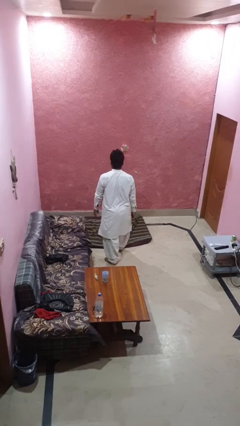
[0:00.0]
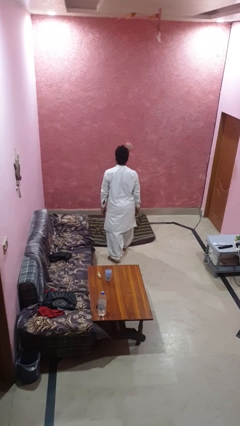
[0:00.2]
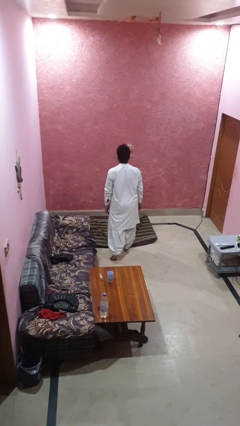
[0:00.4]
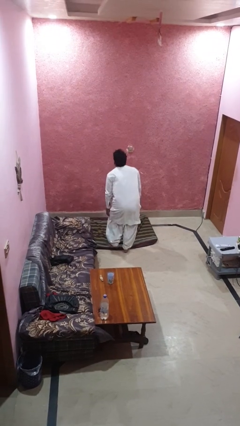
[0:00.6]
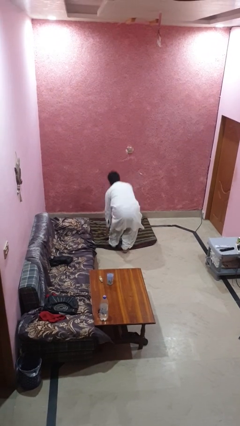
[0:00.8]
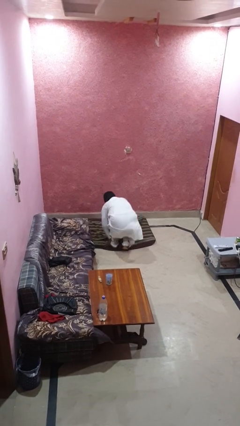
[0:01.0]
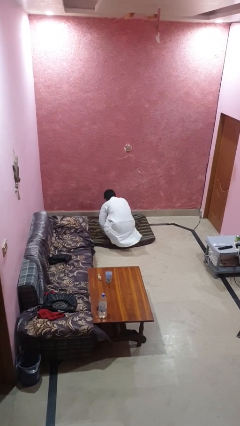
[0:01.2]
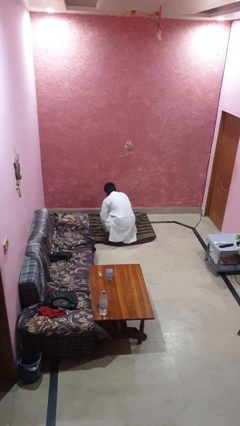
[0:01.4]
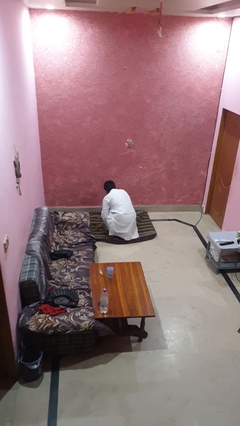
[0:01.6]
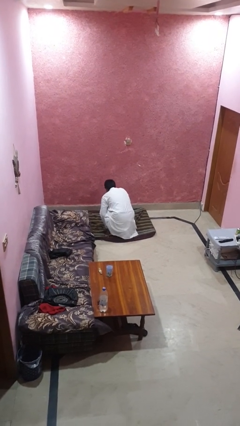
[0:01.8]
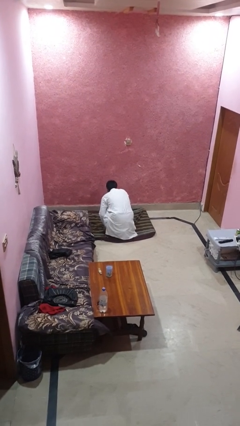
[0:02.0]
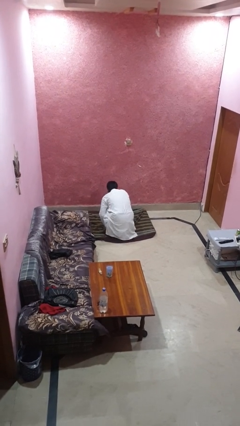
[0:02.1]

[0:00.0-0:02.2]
person trips on object on floor

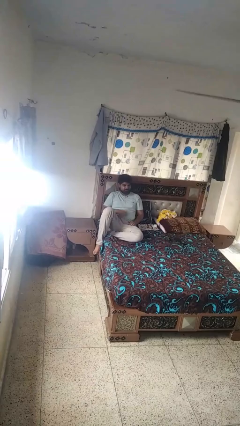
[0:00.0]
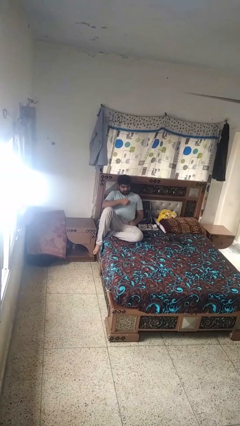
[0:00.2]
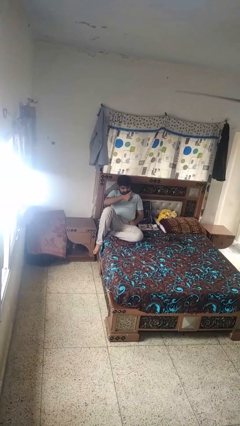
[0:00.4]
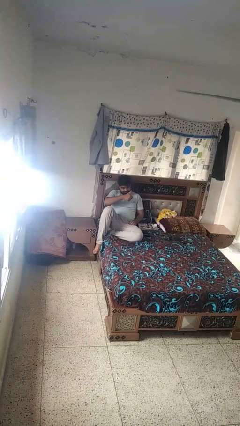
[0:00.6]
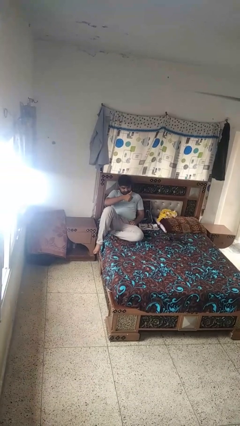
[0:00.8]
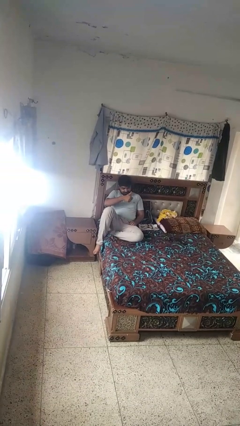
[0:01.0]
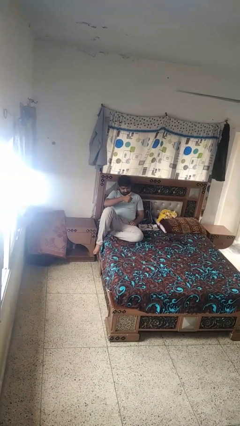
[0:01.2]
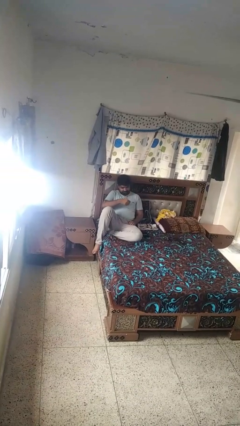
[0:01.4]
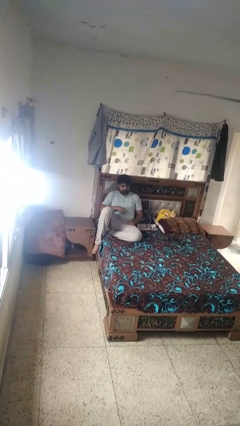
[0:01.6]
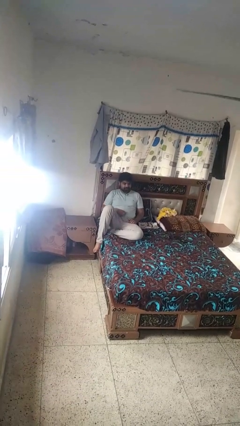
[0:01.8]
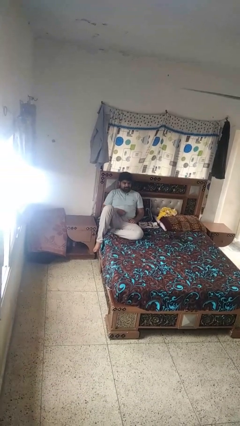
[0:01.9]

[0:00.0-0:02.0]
person gestures thumbs up

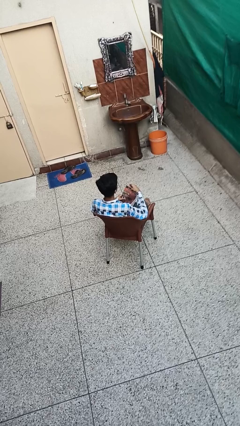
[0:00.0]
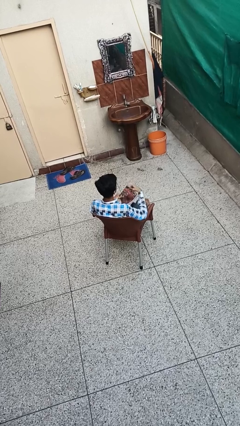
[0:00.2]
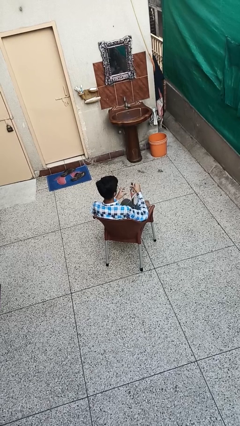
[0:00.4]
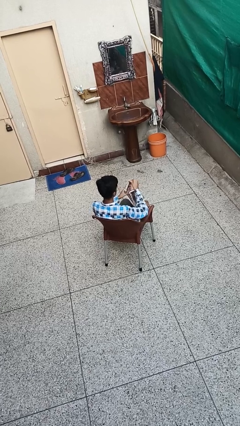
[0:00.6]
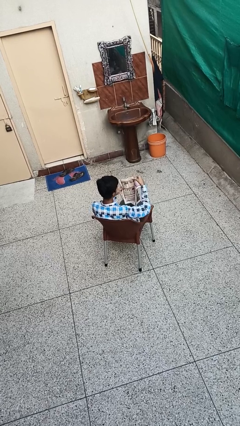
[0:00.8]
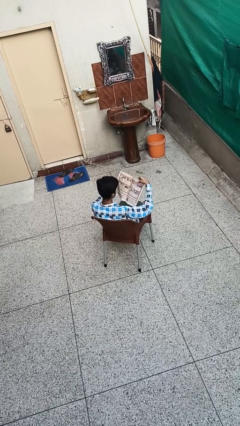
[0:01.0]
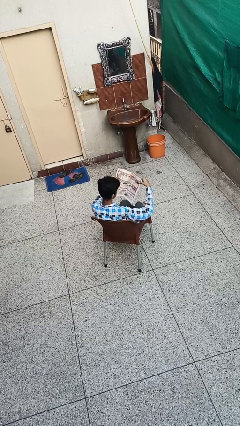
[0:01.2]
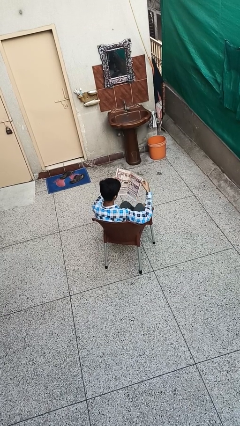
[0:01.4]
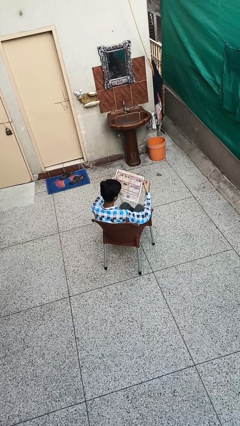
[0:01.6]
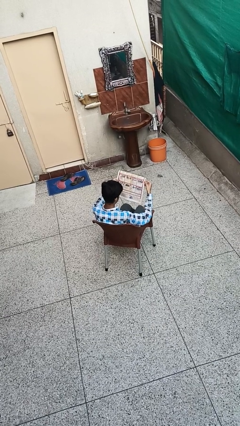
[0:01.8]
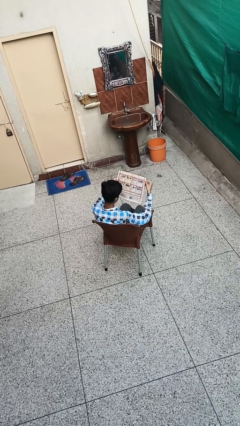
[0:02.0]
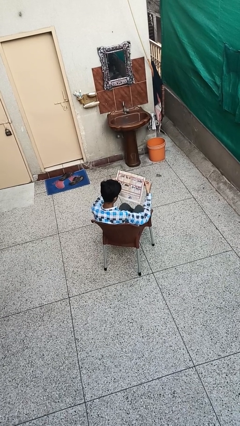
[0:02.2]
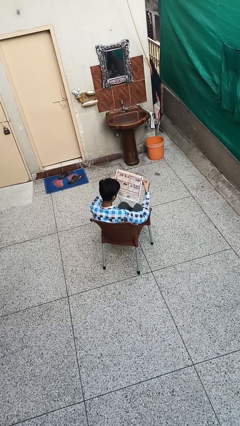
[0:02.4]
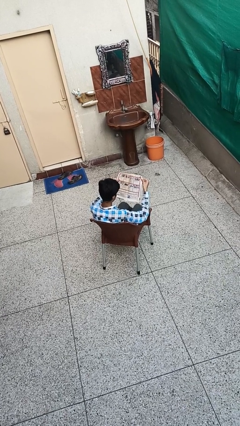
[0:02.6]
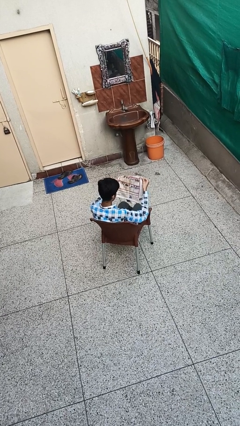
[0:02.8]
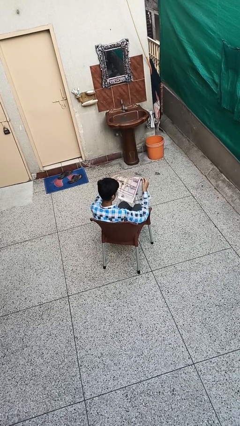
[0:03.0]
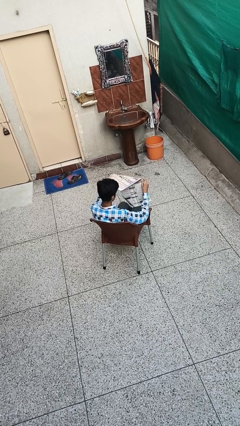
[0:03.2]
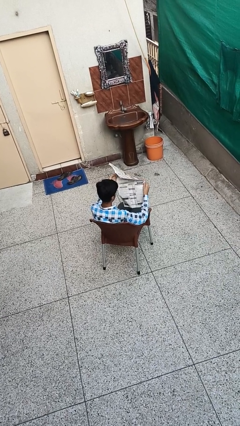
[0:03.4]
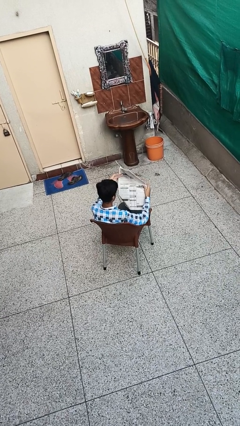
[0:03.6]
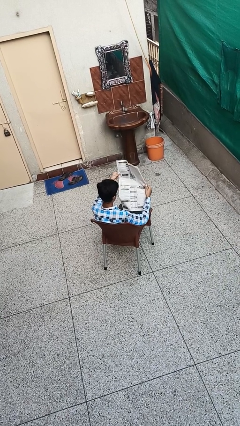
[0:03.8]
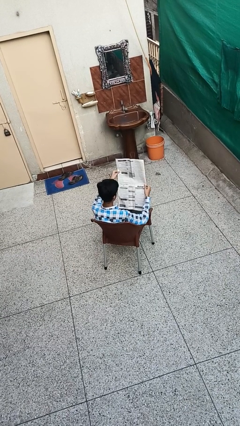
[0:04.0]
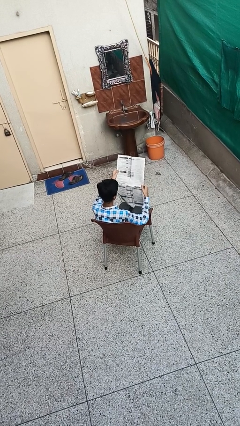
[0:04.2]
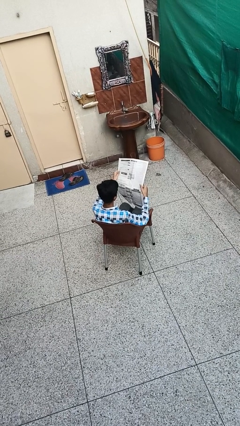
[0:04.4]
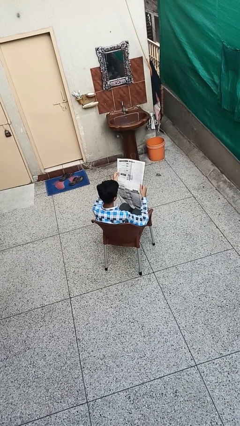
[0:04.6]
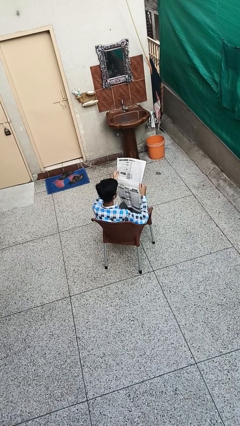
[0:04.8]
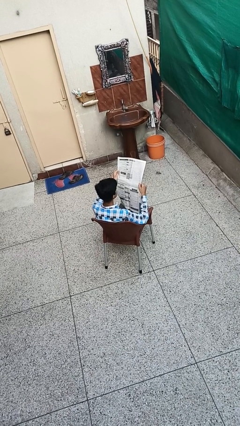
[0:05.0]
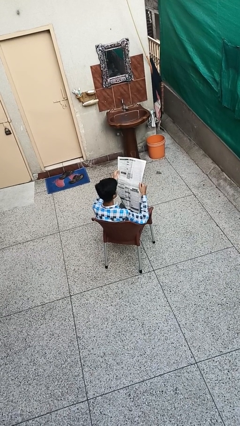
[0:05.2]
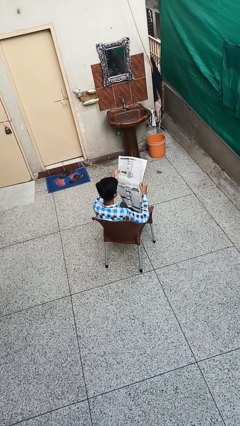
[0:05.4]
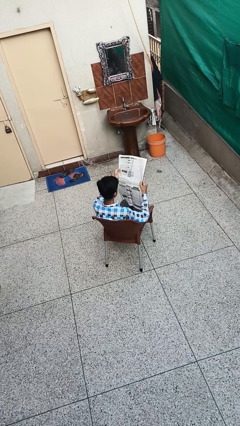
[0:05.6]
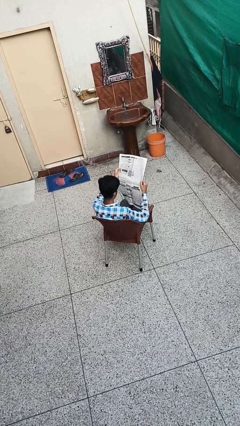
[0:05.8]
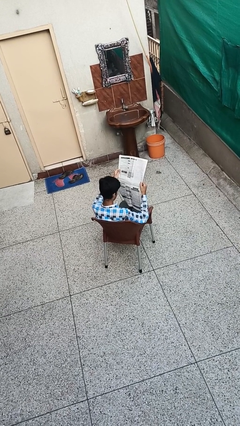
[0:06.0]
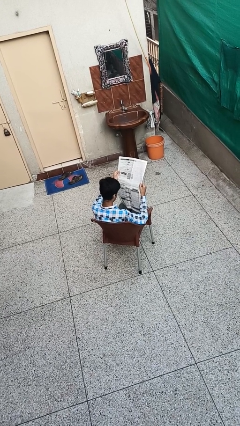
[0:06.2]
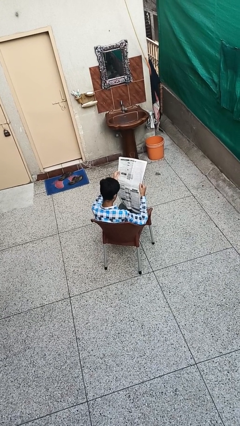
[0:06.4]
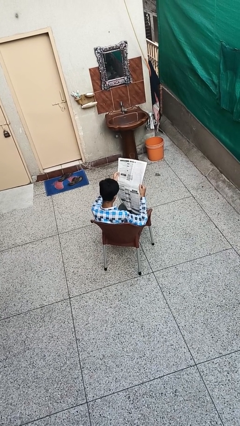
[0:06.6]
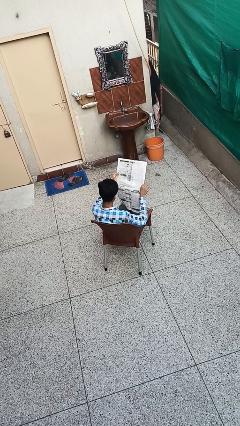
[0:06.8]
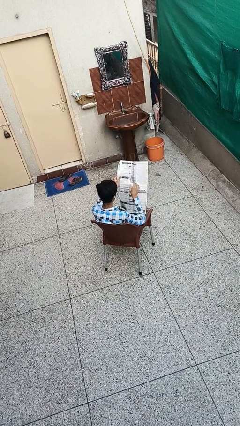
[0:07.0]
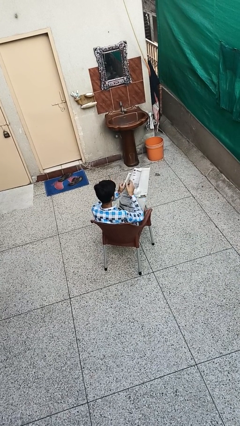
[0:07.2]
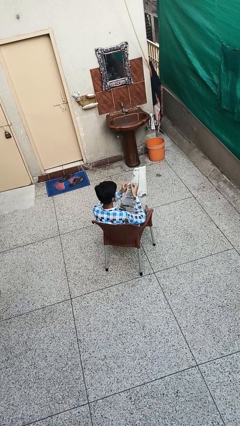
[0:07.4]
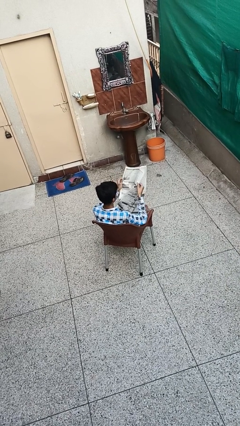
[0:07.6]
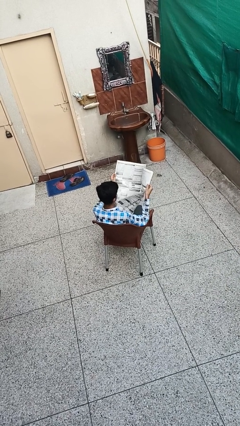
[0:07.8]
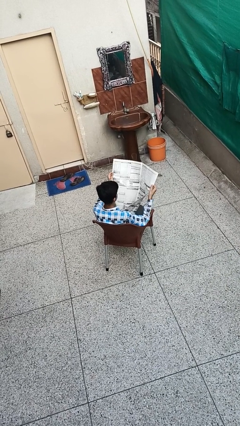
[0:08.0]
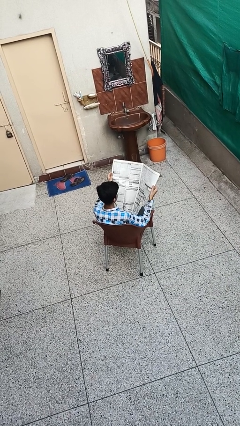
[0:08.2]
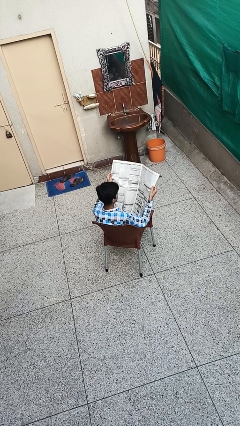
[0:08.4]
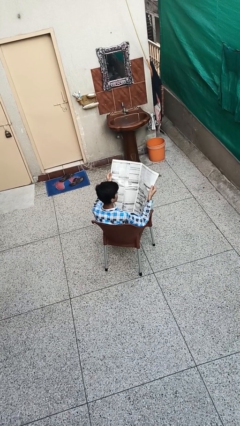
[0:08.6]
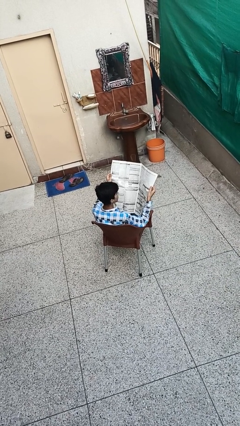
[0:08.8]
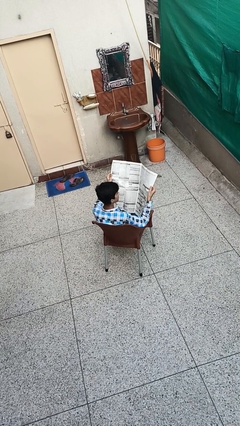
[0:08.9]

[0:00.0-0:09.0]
person reads newspaper

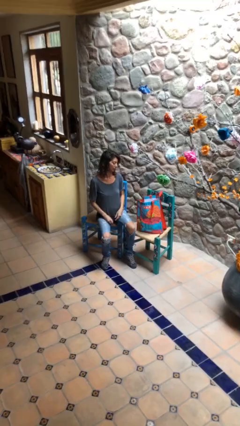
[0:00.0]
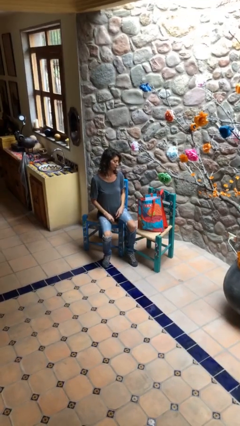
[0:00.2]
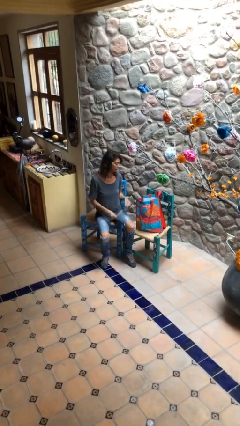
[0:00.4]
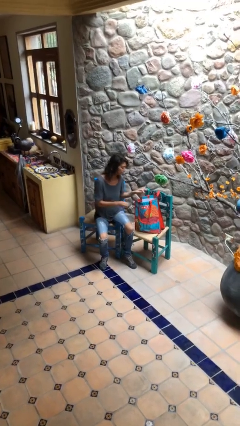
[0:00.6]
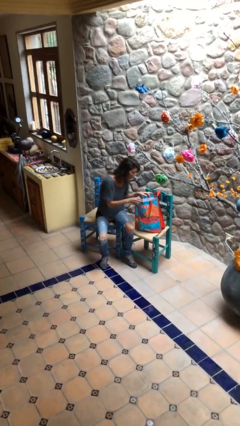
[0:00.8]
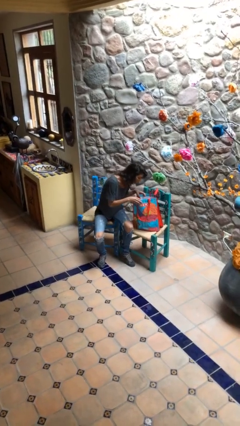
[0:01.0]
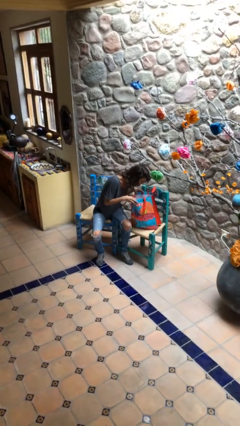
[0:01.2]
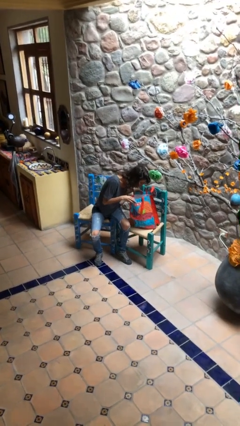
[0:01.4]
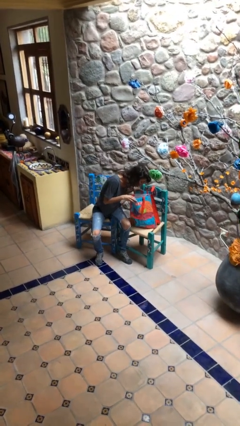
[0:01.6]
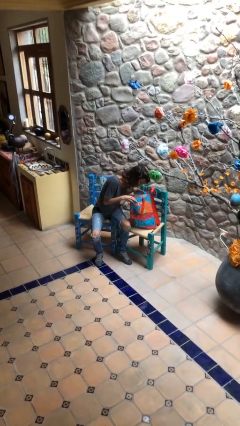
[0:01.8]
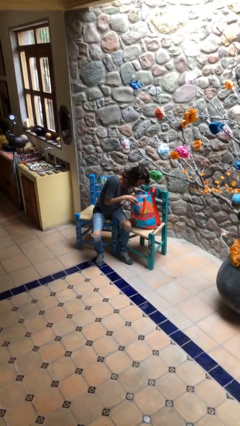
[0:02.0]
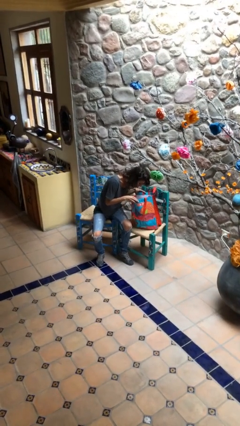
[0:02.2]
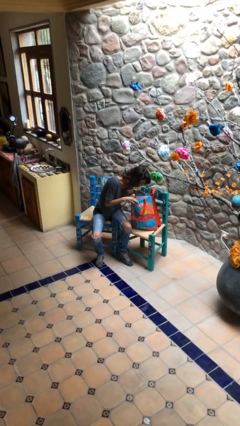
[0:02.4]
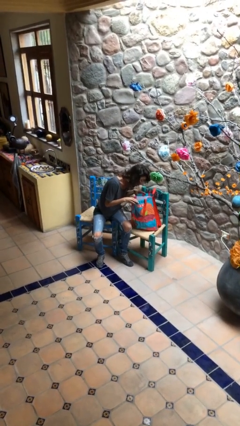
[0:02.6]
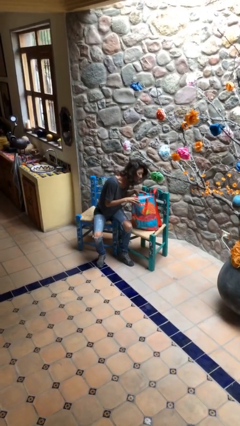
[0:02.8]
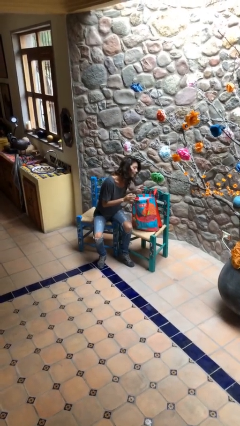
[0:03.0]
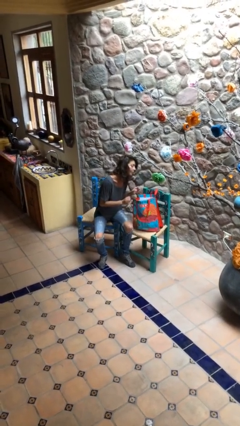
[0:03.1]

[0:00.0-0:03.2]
person searches in bag

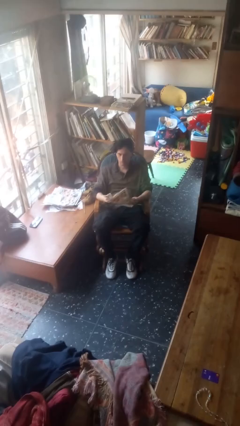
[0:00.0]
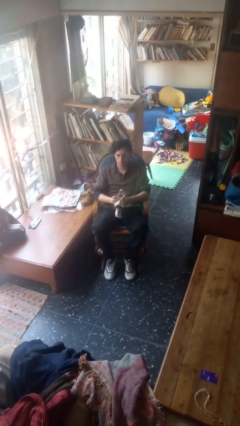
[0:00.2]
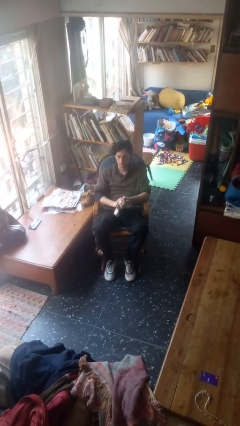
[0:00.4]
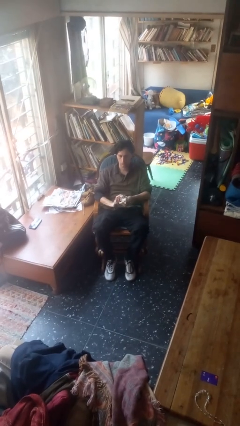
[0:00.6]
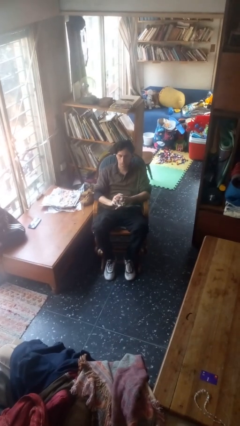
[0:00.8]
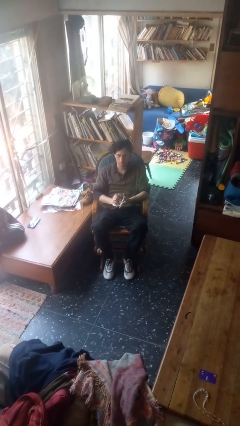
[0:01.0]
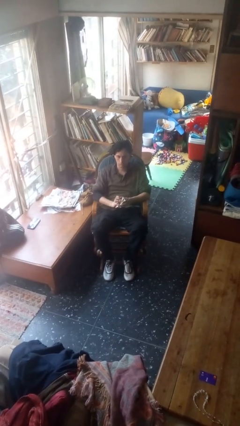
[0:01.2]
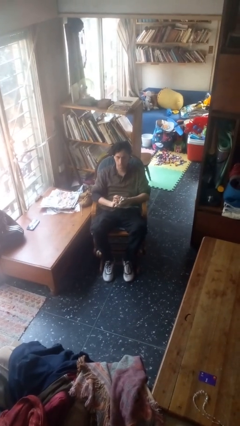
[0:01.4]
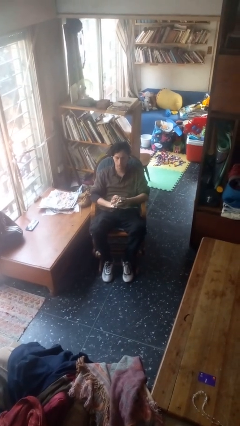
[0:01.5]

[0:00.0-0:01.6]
person crumples paper
